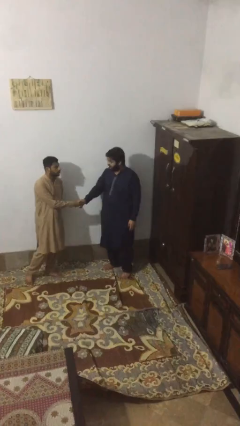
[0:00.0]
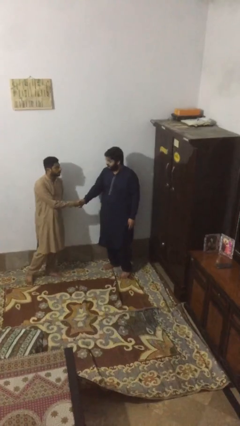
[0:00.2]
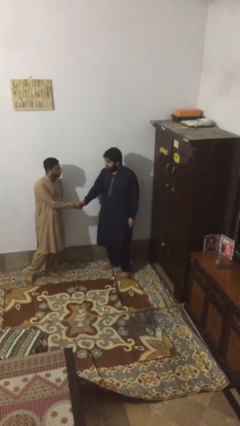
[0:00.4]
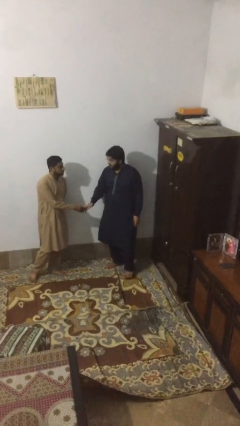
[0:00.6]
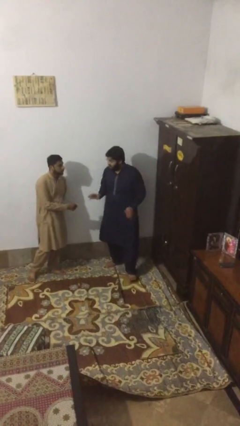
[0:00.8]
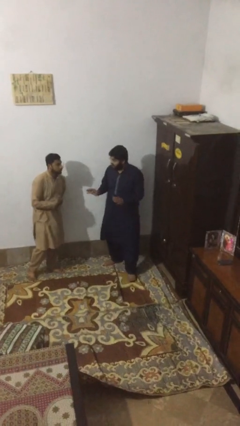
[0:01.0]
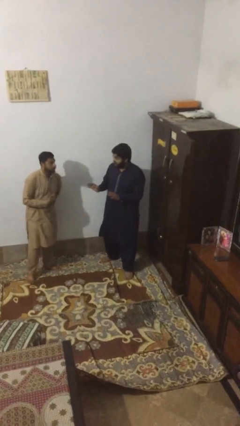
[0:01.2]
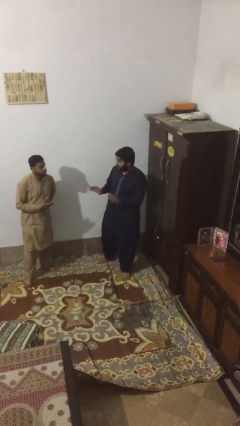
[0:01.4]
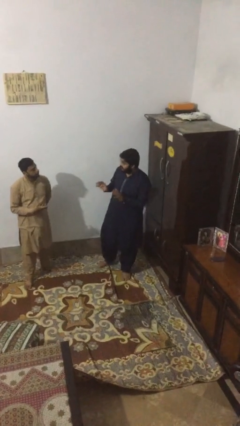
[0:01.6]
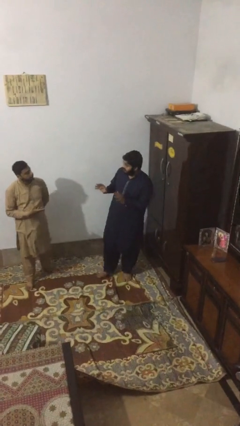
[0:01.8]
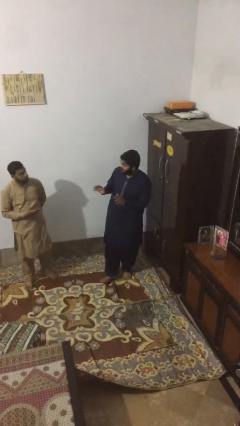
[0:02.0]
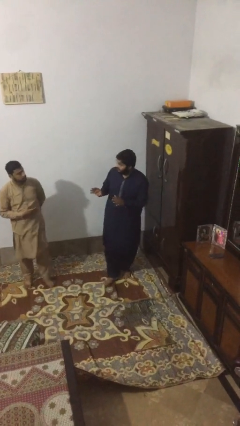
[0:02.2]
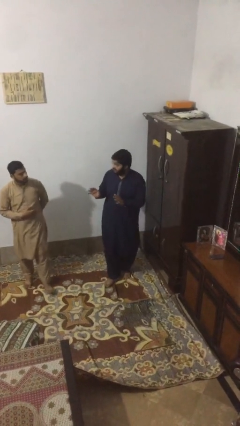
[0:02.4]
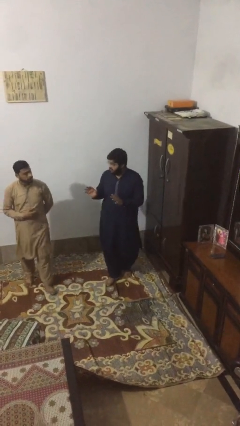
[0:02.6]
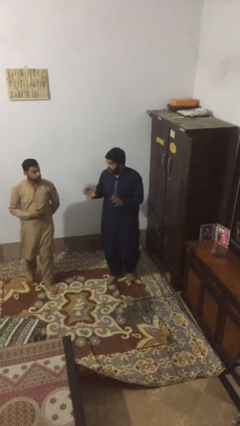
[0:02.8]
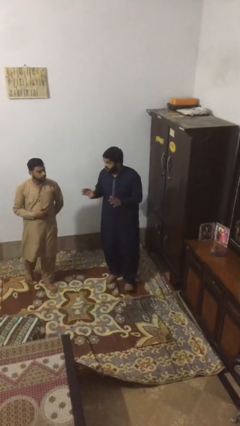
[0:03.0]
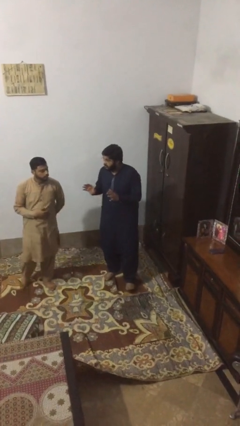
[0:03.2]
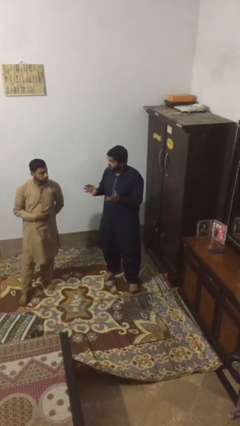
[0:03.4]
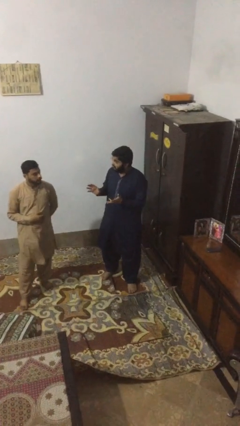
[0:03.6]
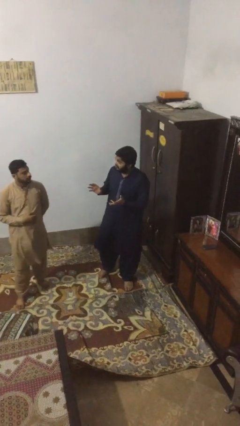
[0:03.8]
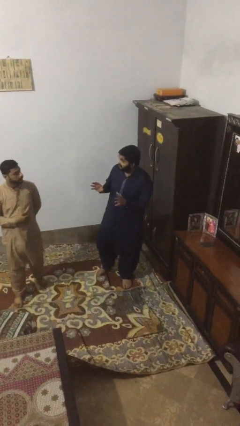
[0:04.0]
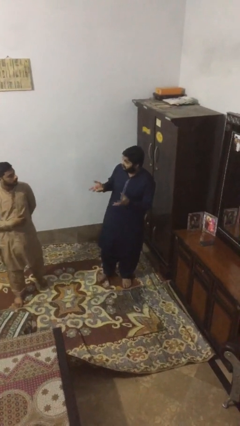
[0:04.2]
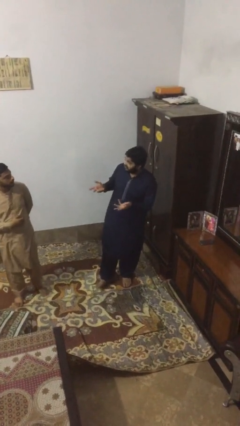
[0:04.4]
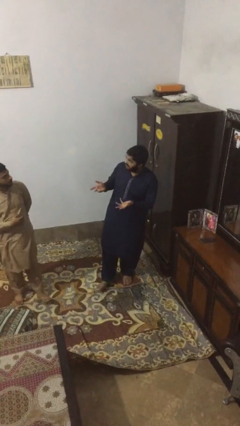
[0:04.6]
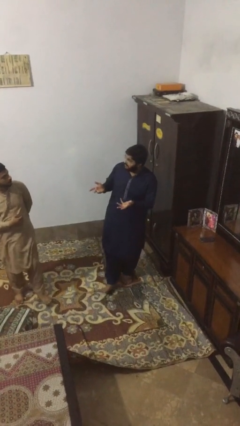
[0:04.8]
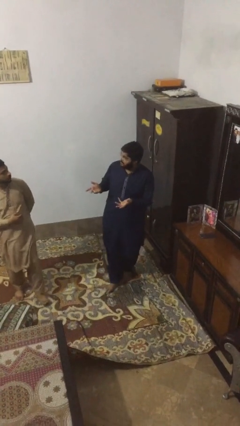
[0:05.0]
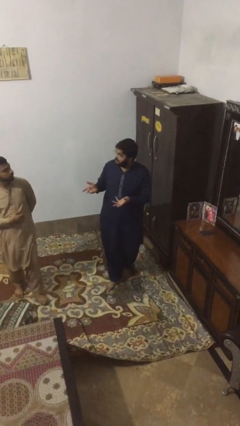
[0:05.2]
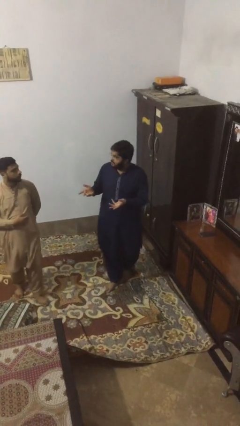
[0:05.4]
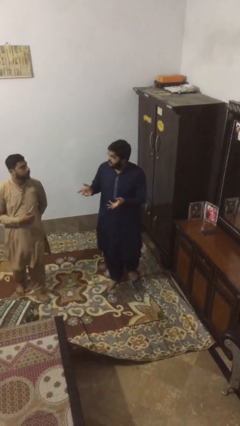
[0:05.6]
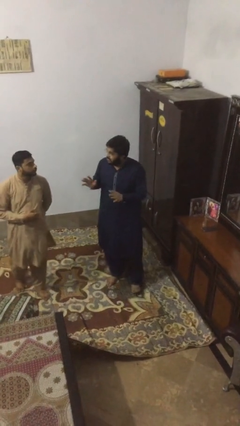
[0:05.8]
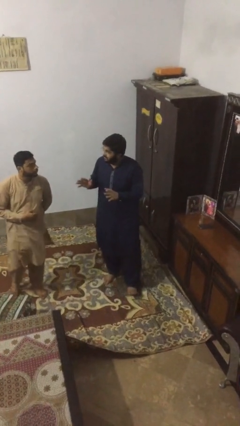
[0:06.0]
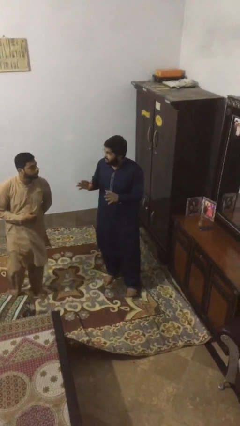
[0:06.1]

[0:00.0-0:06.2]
person talks to person

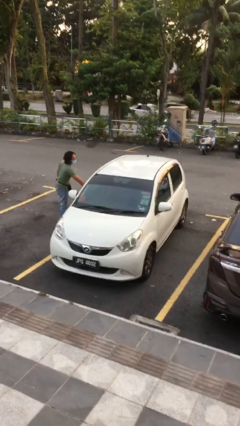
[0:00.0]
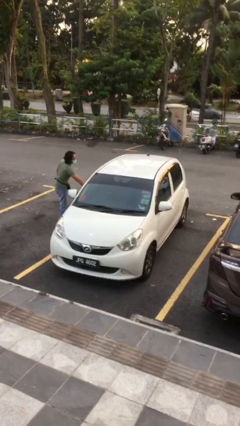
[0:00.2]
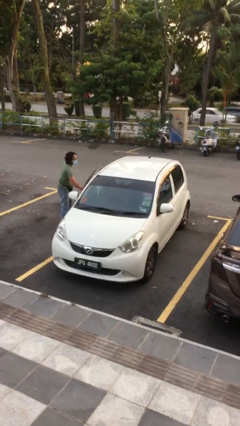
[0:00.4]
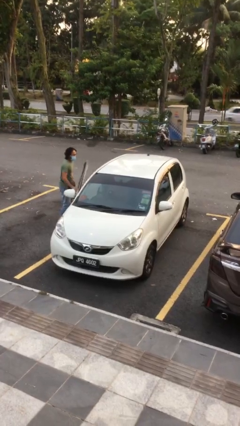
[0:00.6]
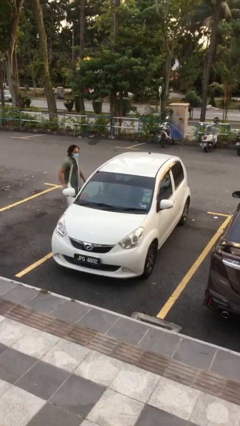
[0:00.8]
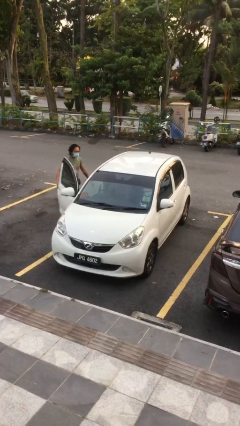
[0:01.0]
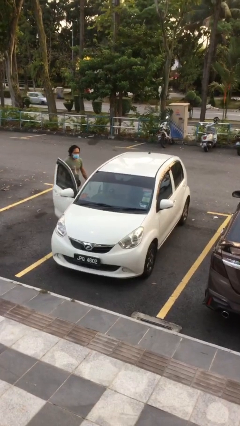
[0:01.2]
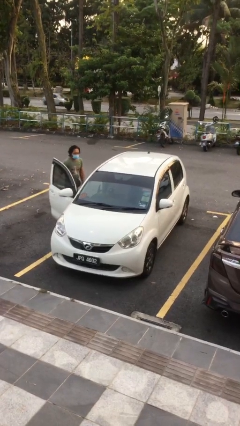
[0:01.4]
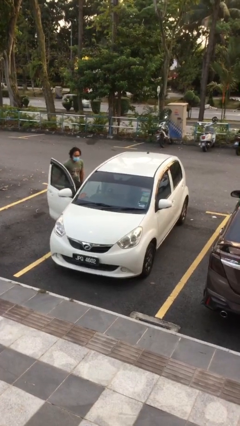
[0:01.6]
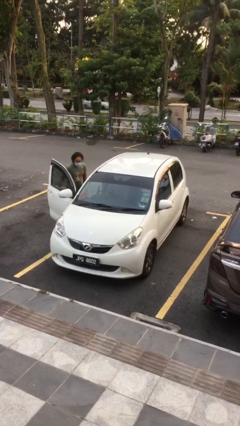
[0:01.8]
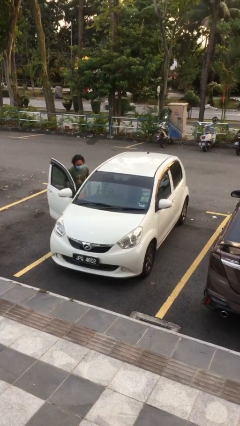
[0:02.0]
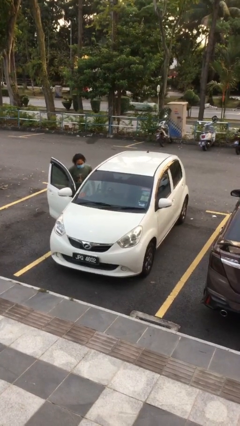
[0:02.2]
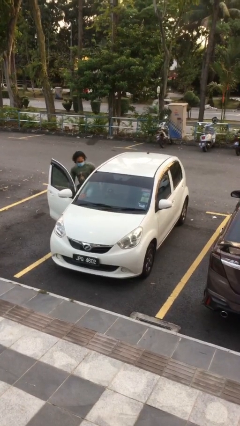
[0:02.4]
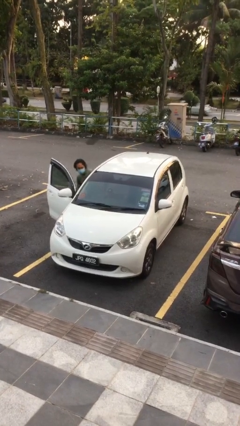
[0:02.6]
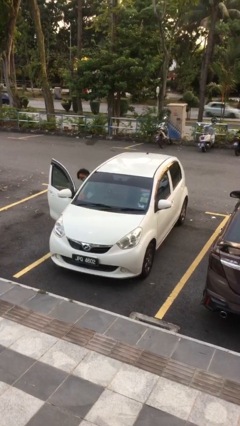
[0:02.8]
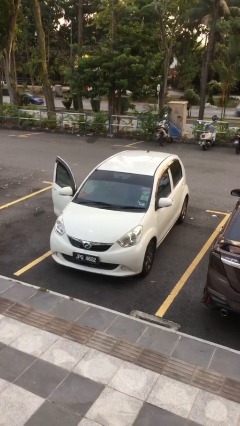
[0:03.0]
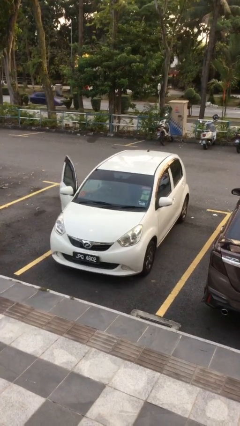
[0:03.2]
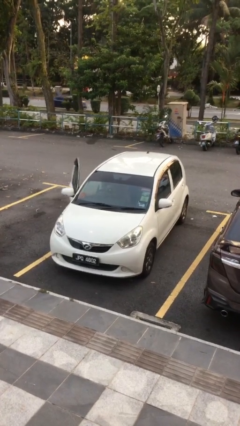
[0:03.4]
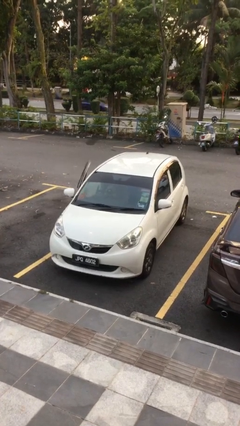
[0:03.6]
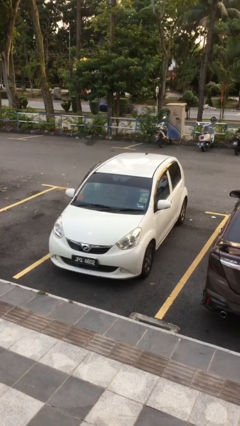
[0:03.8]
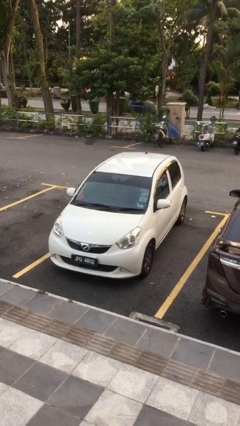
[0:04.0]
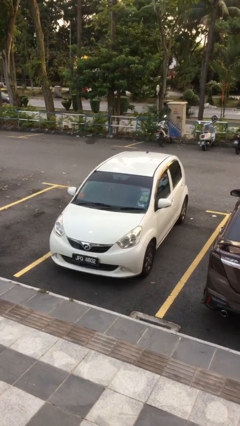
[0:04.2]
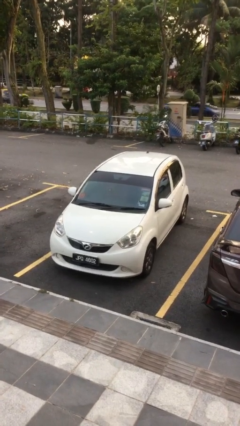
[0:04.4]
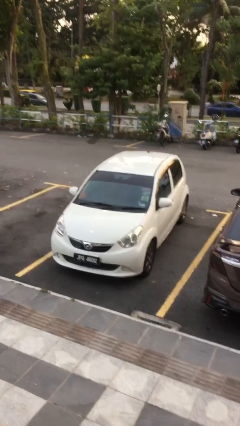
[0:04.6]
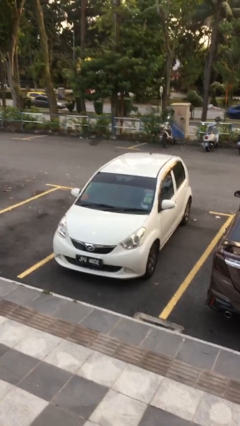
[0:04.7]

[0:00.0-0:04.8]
car picks up person

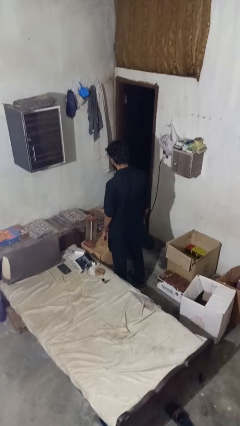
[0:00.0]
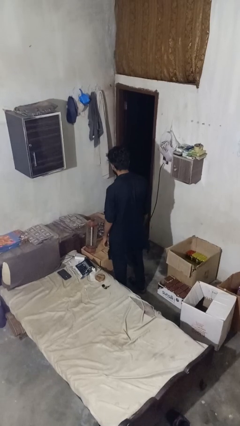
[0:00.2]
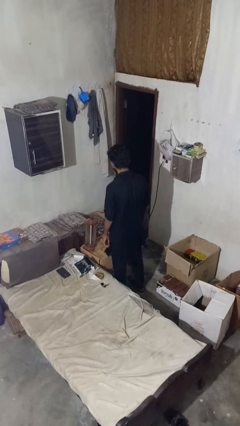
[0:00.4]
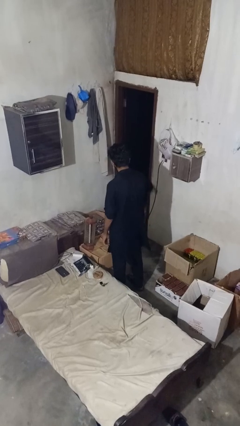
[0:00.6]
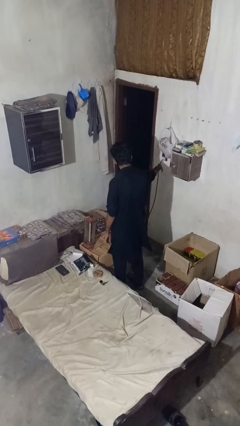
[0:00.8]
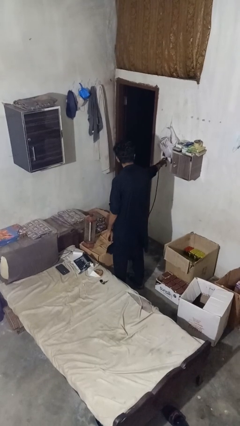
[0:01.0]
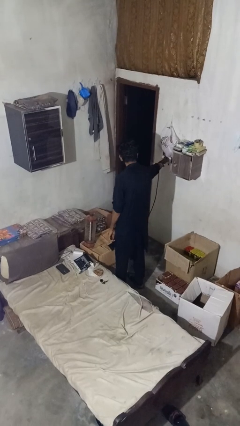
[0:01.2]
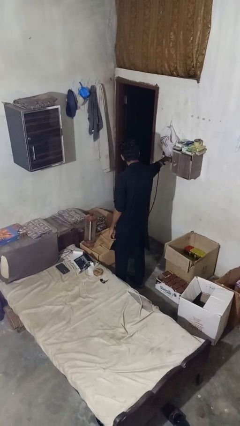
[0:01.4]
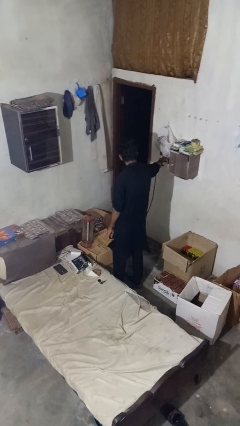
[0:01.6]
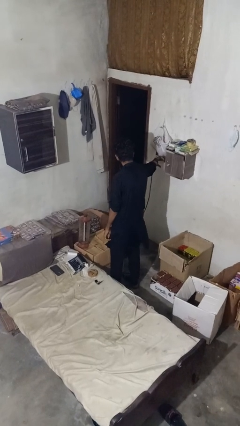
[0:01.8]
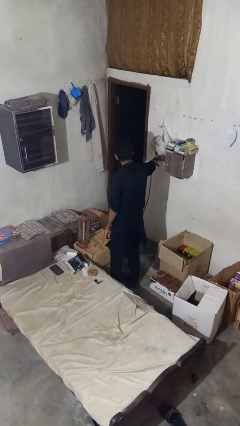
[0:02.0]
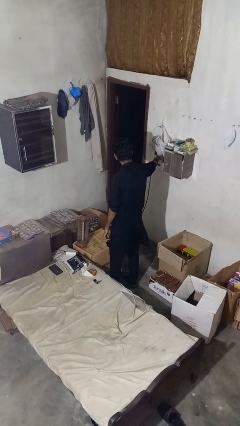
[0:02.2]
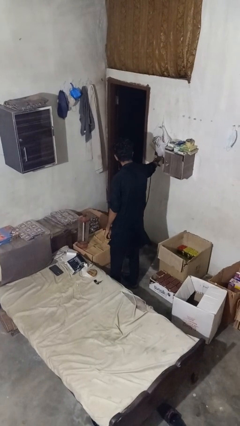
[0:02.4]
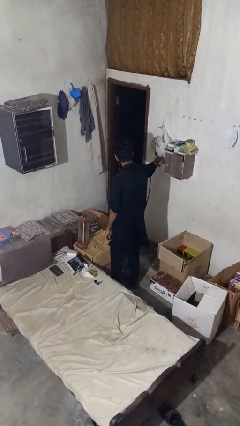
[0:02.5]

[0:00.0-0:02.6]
person turns on lamp

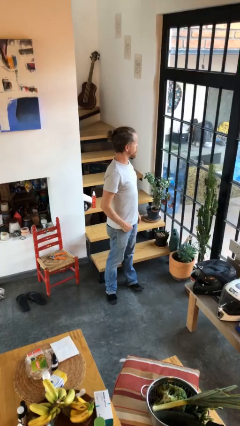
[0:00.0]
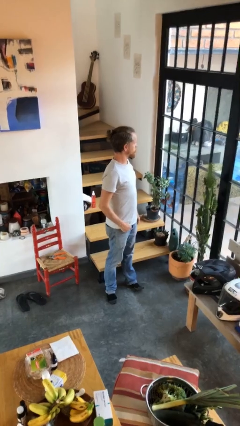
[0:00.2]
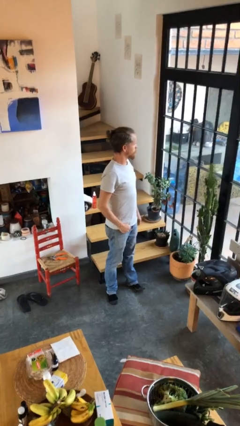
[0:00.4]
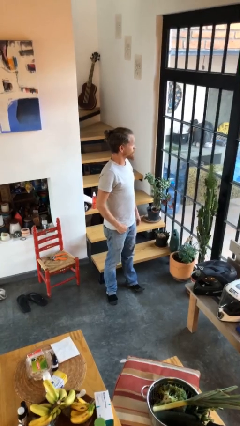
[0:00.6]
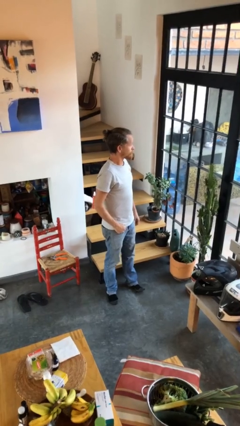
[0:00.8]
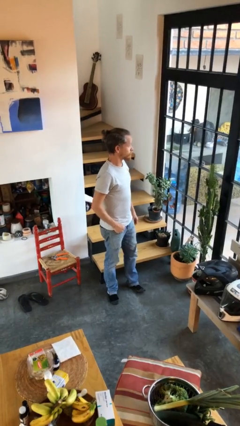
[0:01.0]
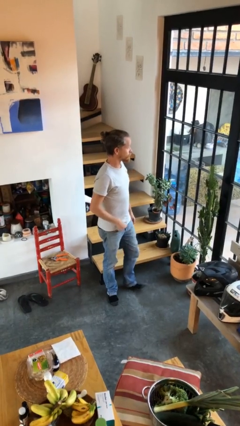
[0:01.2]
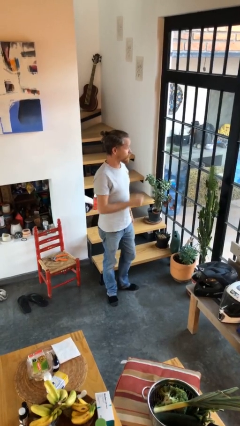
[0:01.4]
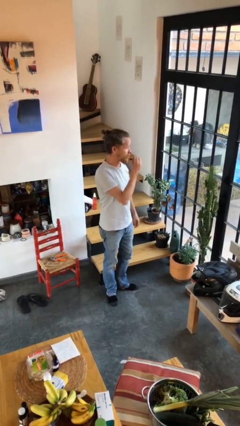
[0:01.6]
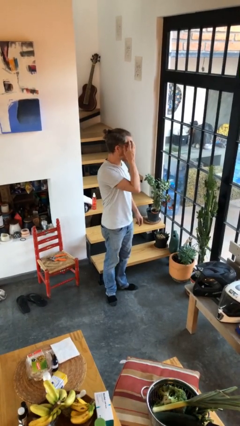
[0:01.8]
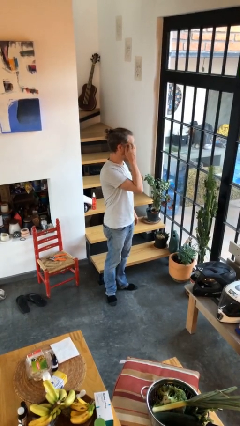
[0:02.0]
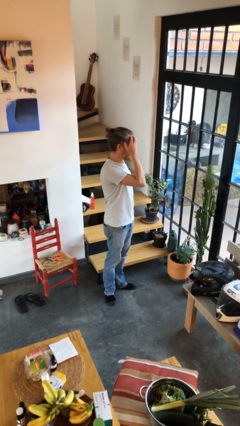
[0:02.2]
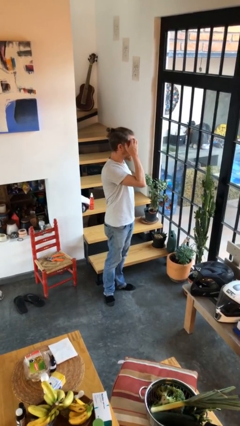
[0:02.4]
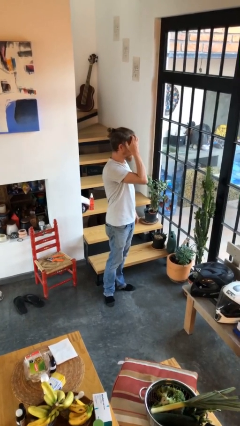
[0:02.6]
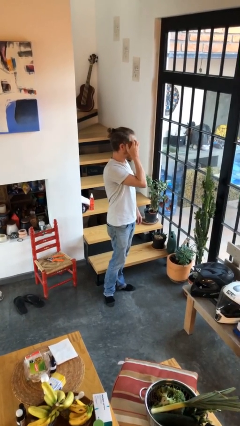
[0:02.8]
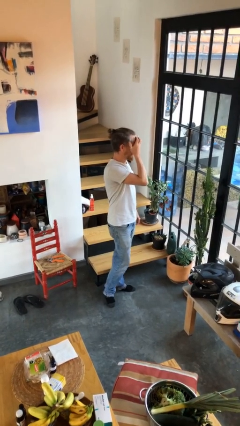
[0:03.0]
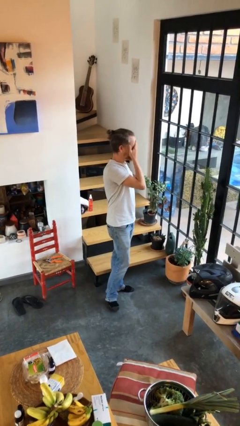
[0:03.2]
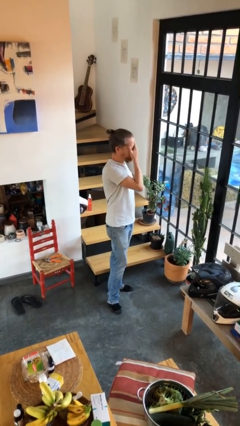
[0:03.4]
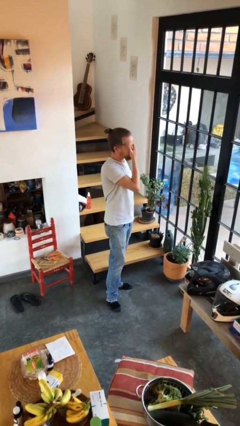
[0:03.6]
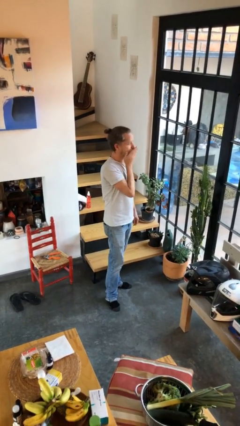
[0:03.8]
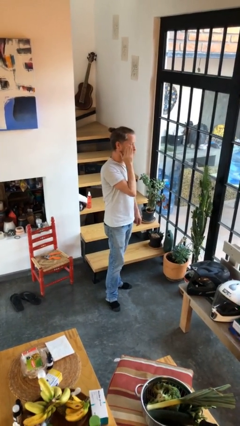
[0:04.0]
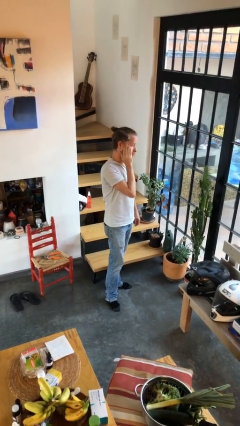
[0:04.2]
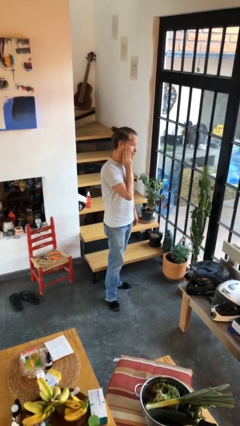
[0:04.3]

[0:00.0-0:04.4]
person scratches face
